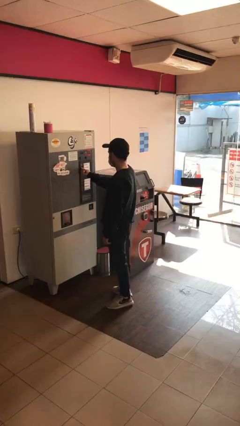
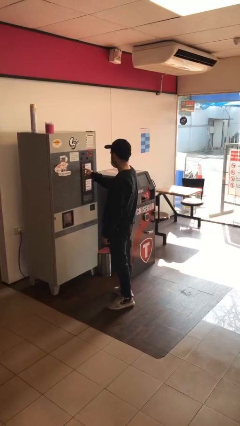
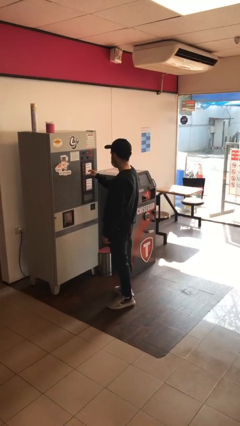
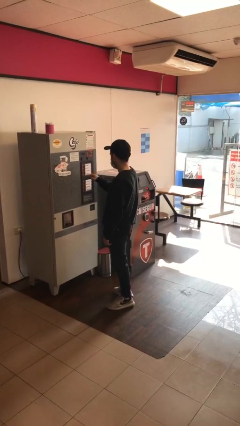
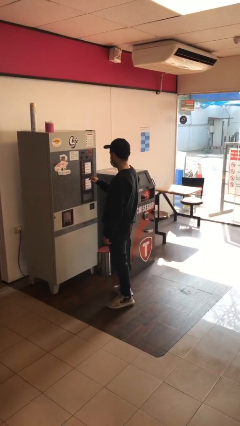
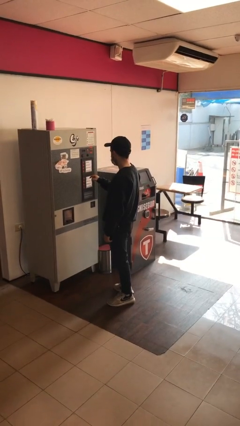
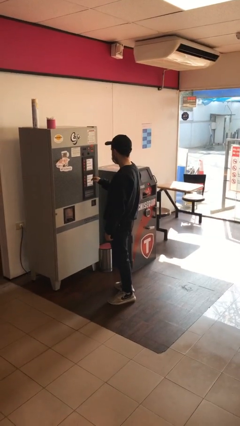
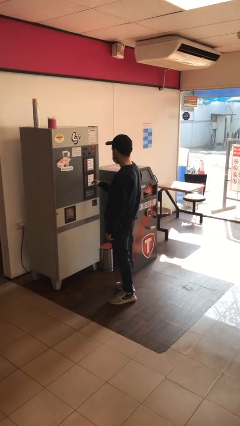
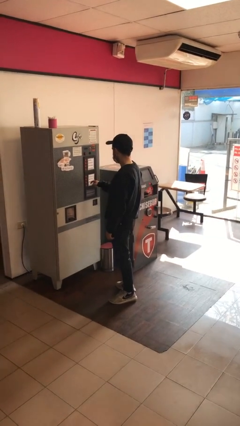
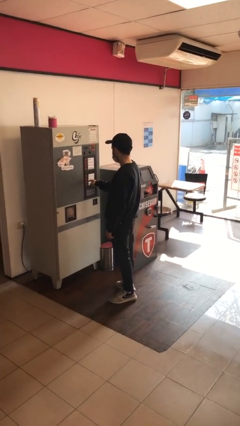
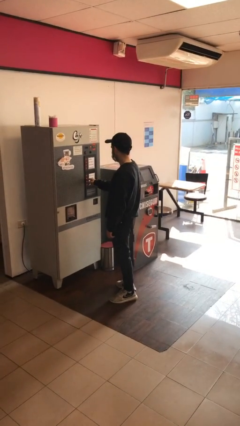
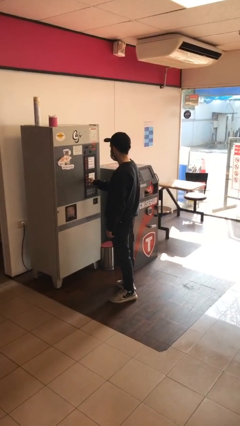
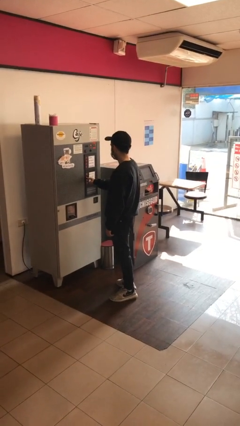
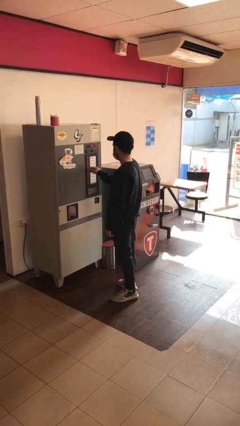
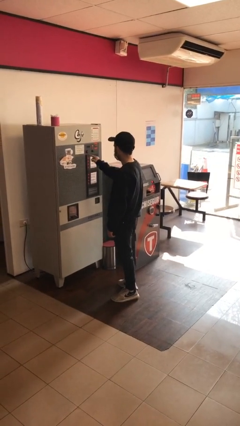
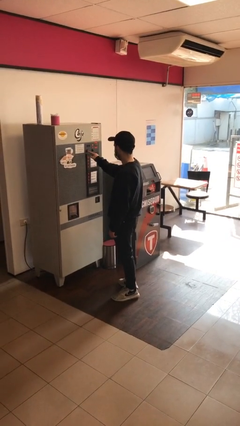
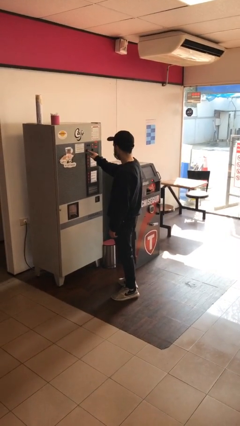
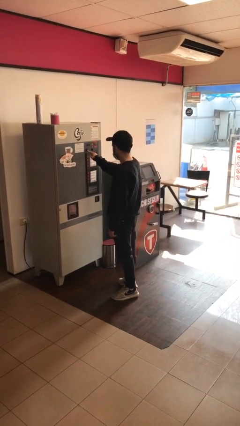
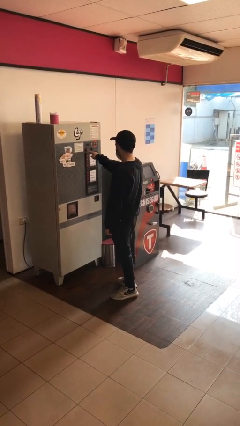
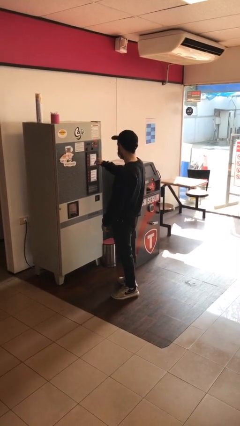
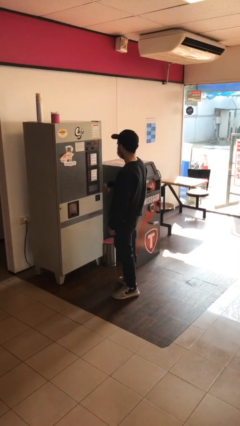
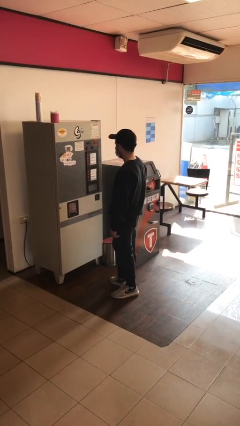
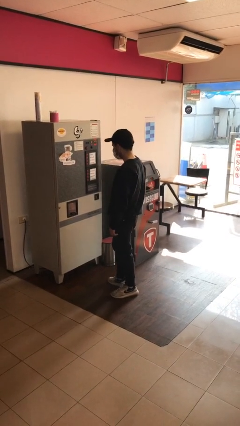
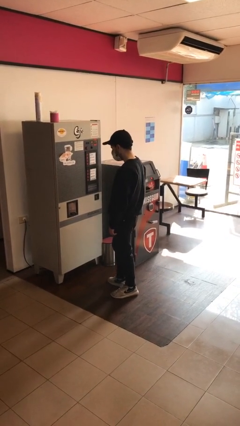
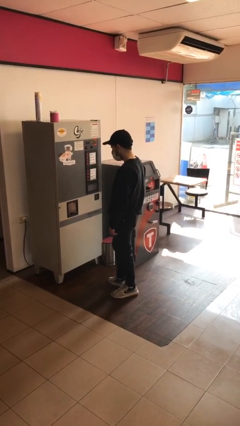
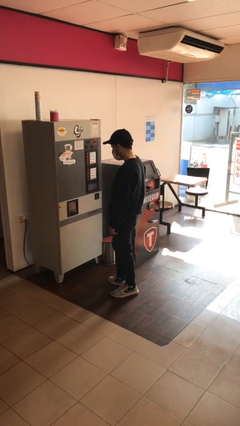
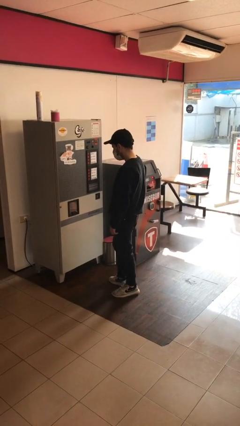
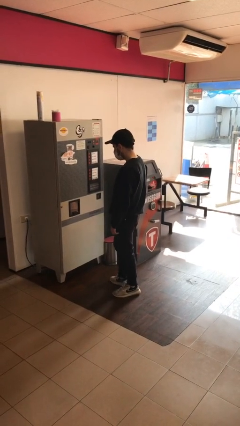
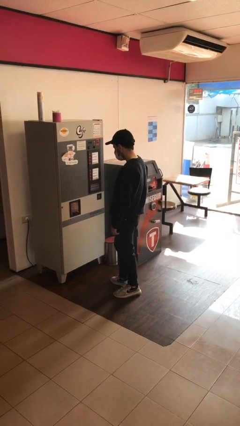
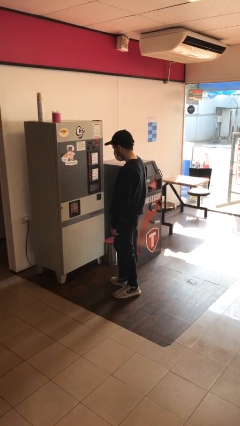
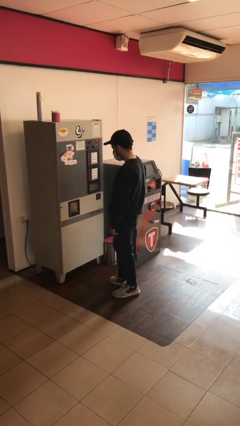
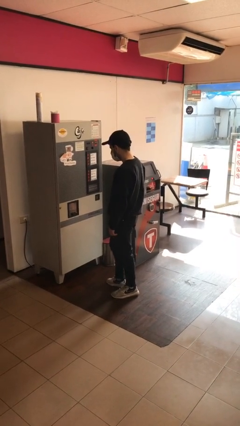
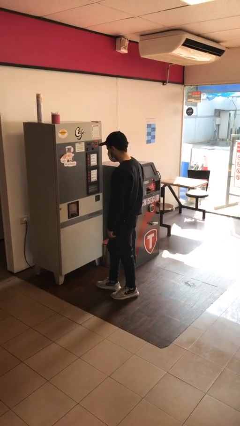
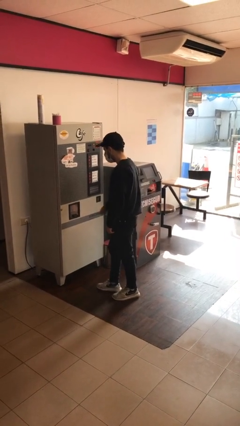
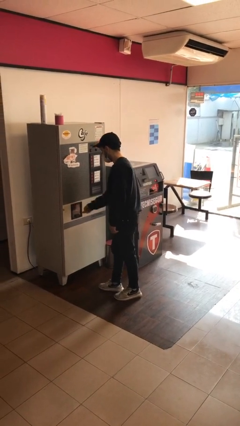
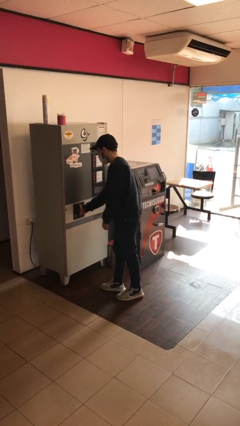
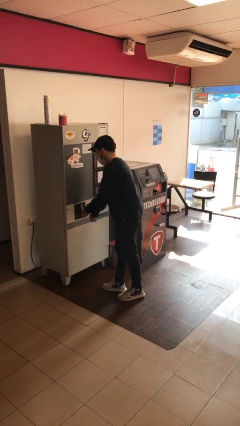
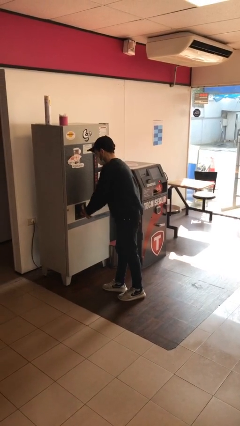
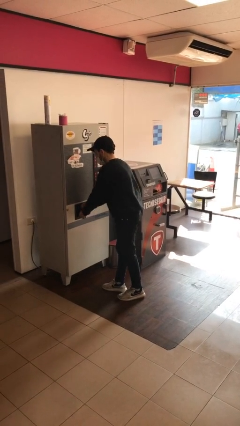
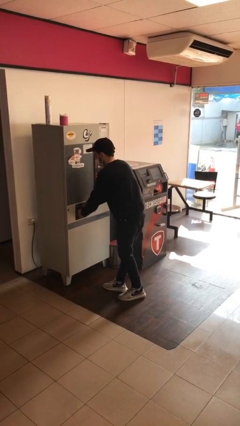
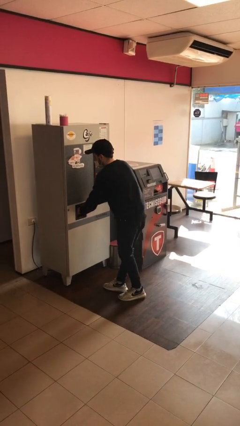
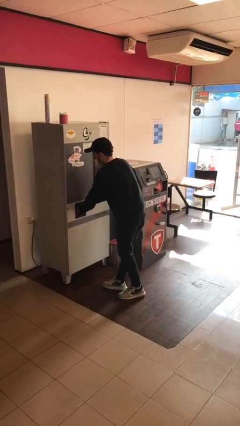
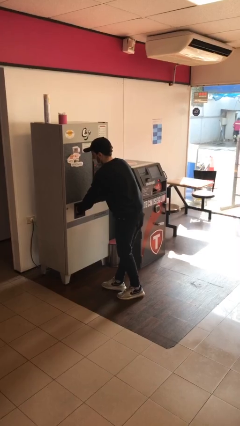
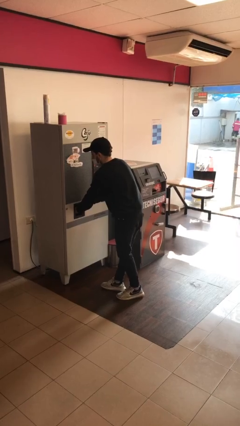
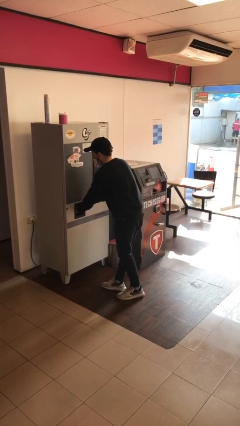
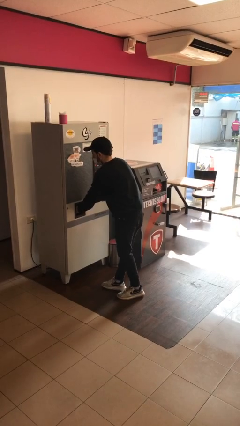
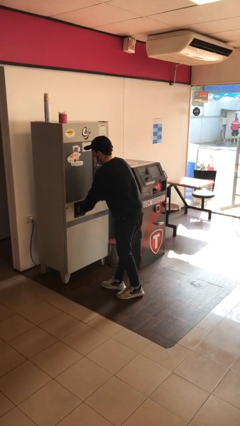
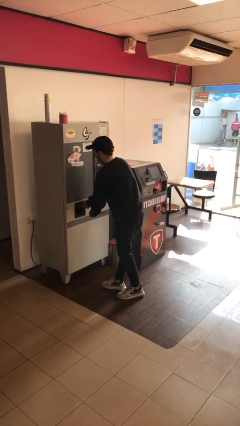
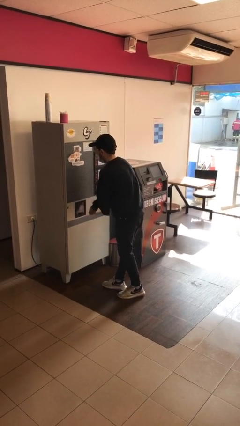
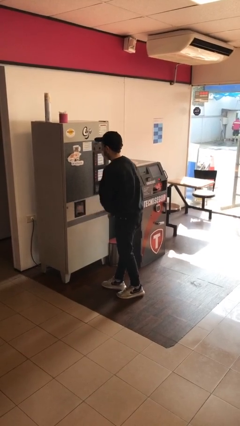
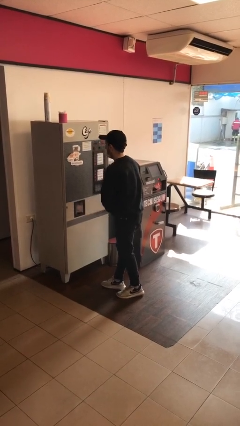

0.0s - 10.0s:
person purchases from machine

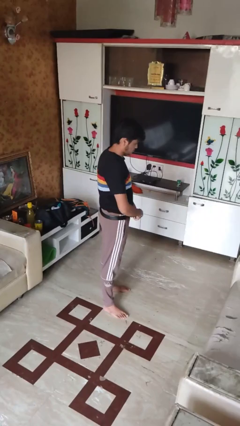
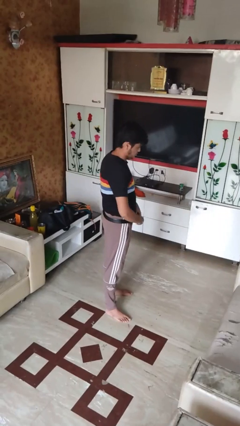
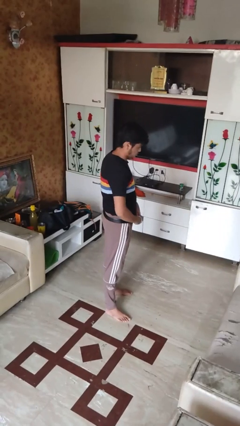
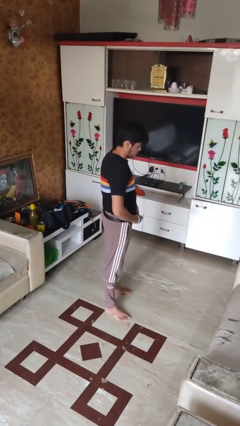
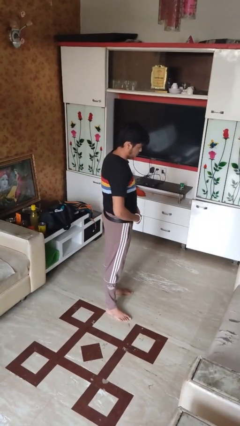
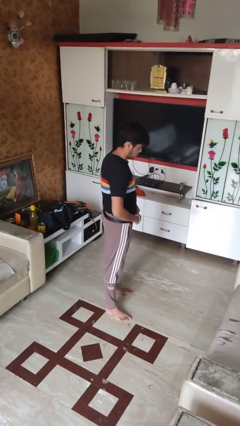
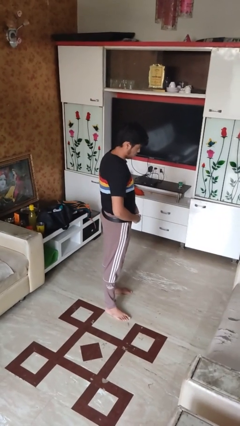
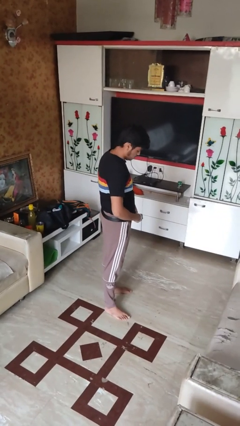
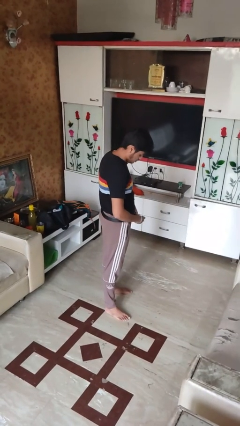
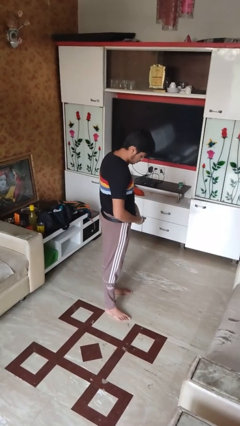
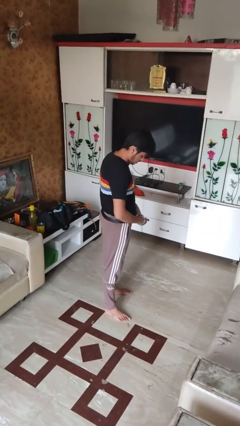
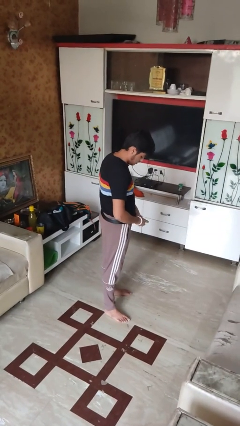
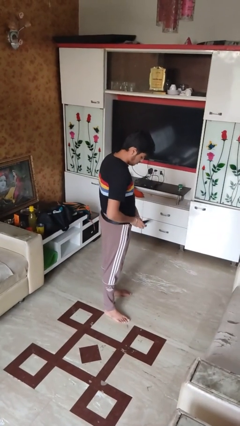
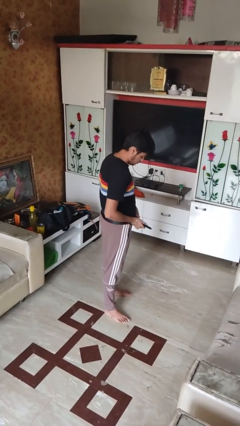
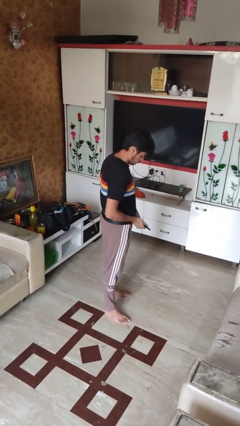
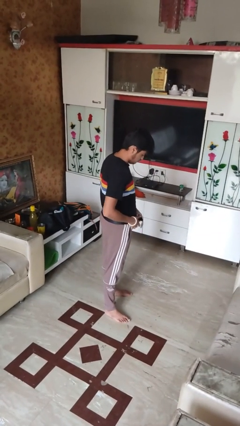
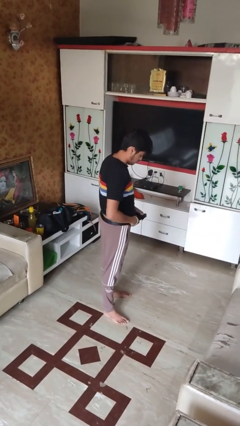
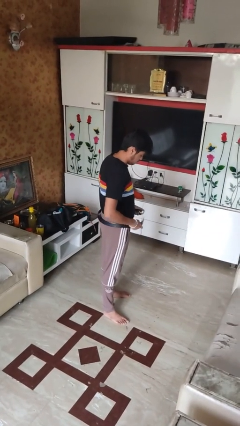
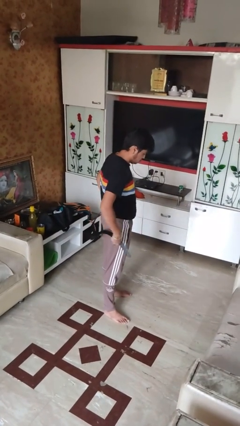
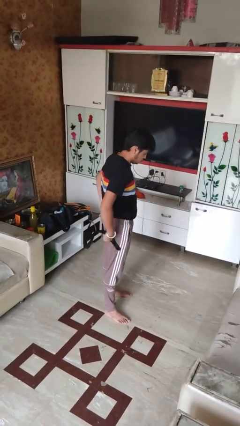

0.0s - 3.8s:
person takes off belt

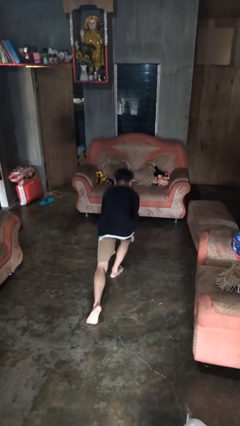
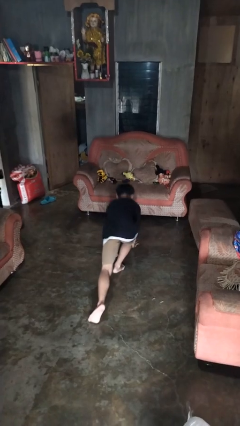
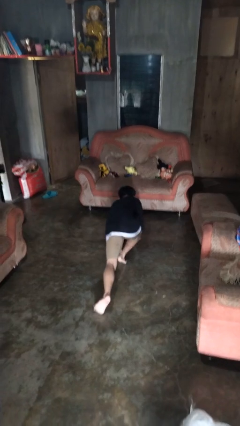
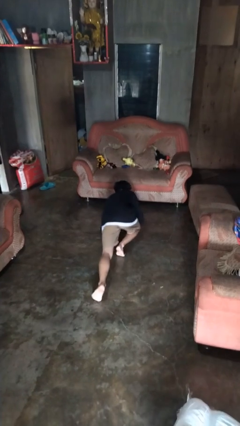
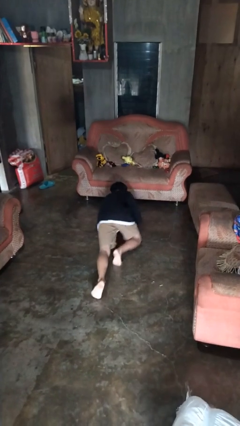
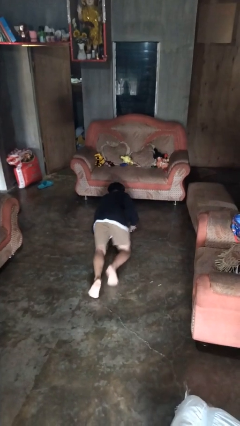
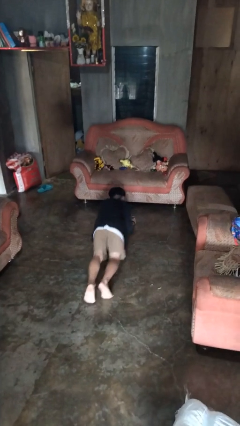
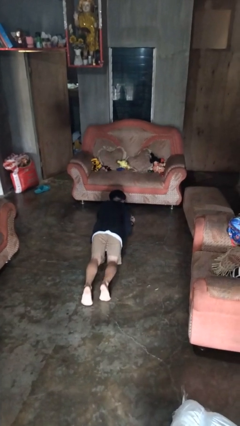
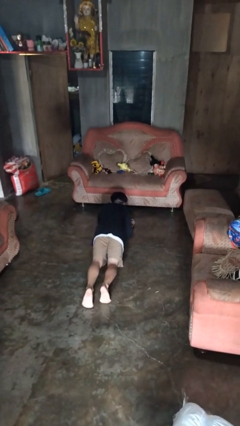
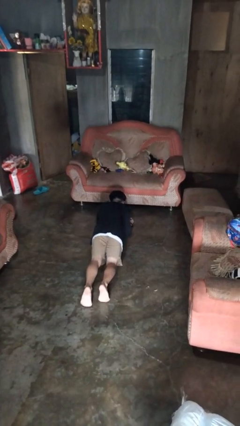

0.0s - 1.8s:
person exercises with plank

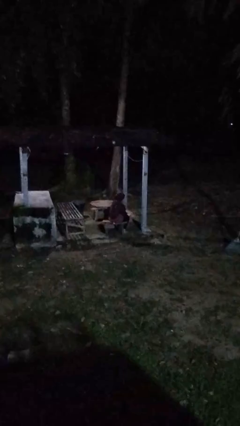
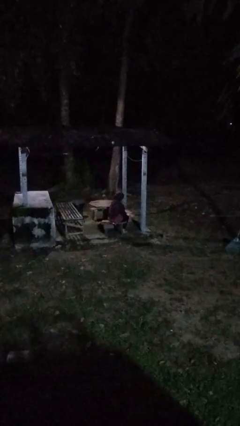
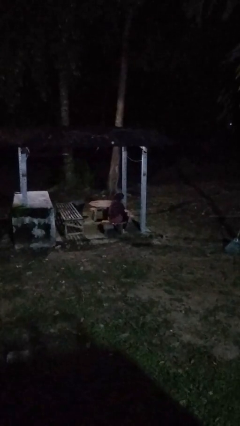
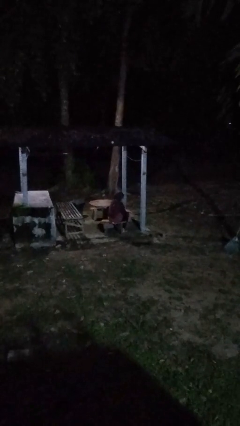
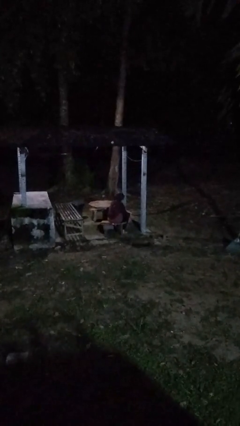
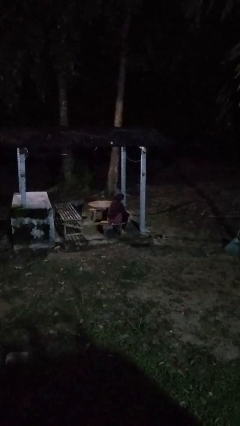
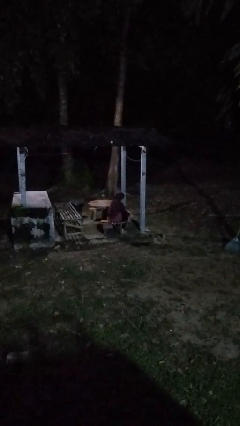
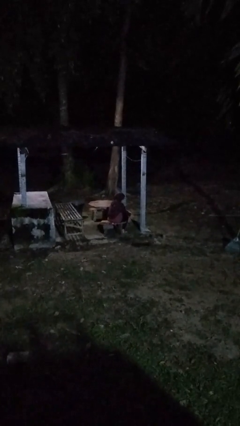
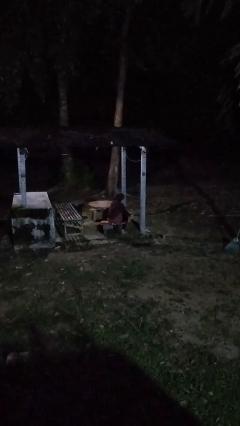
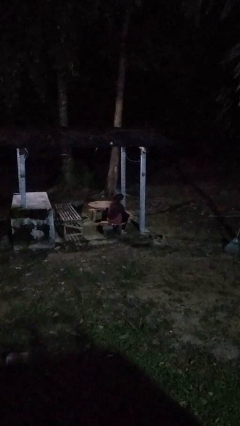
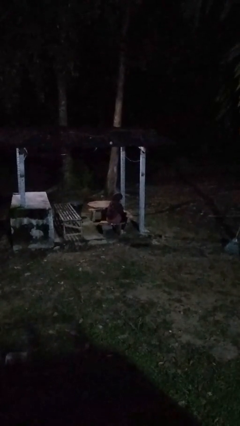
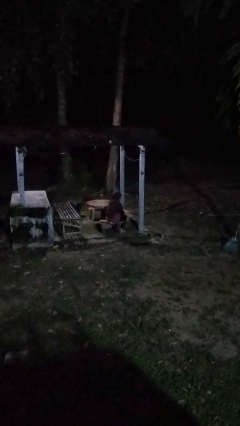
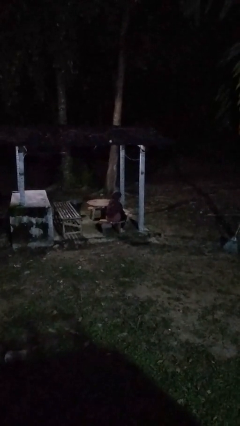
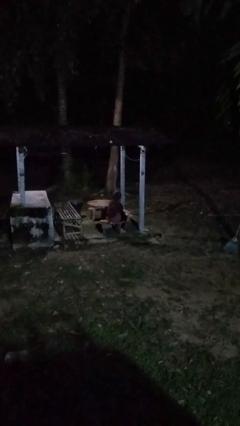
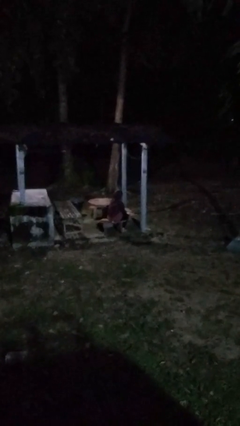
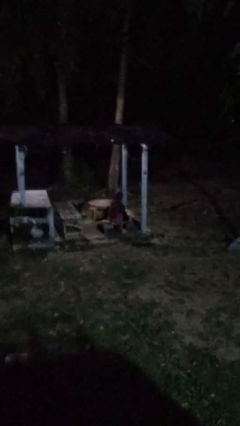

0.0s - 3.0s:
person rubs foot
